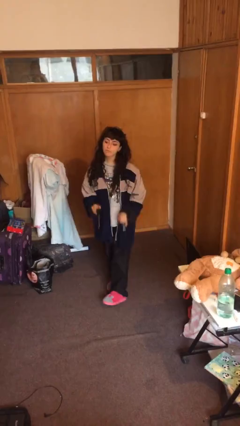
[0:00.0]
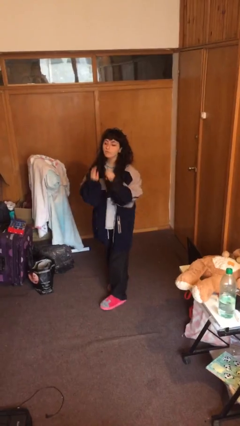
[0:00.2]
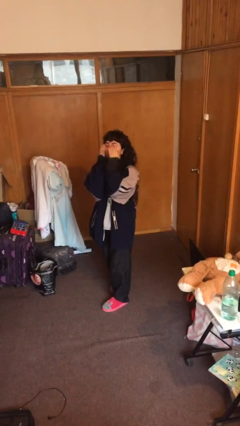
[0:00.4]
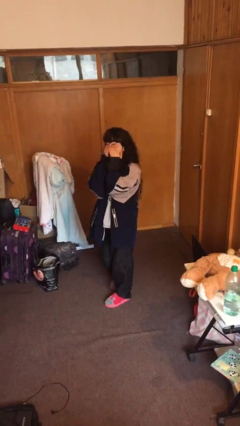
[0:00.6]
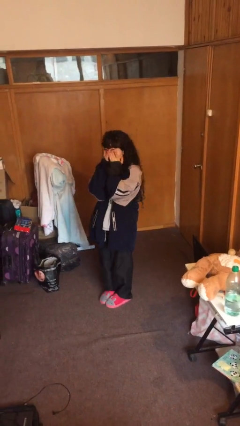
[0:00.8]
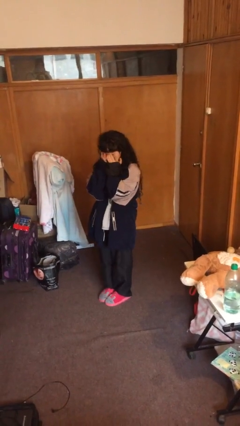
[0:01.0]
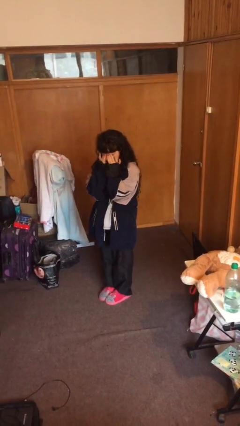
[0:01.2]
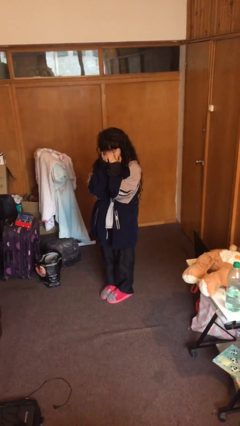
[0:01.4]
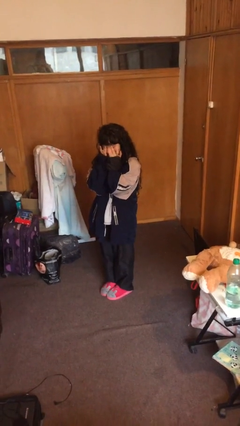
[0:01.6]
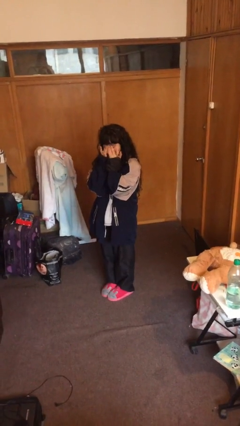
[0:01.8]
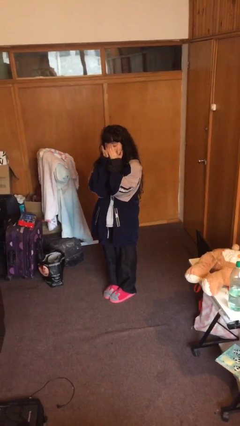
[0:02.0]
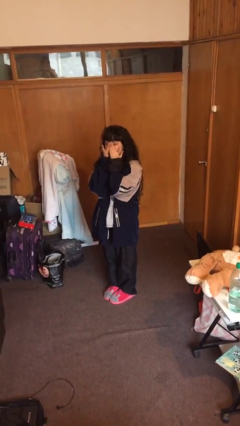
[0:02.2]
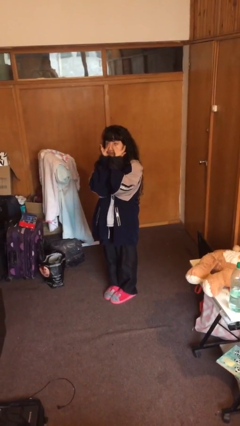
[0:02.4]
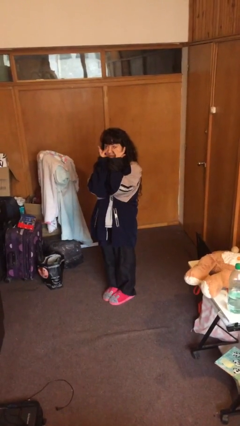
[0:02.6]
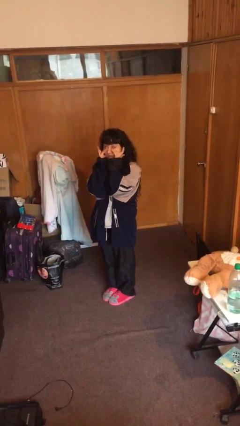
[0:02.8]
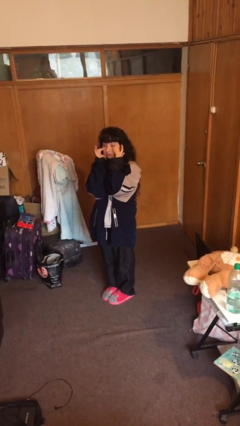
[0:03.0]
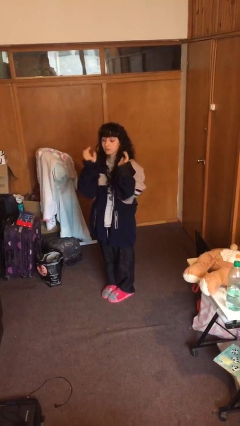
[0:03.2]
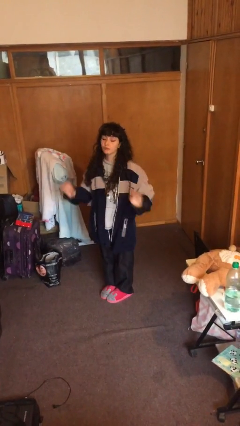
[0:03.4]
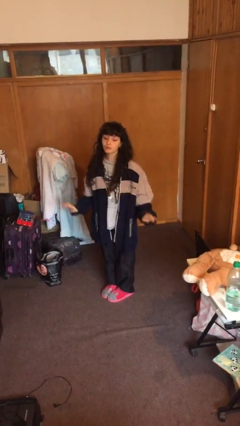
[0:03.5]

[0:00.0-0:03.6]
person rubs eyes

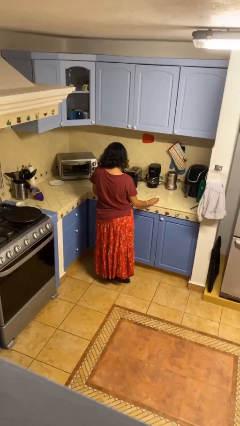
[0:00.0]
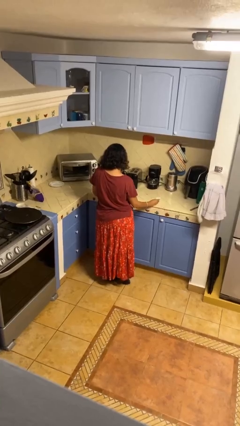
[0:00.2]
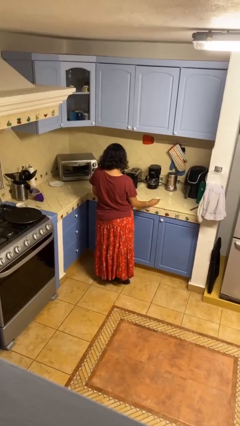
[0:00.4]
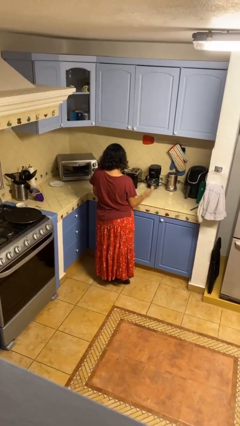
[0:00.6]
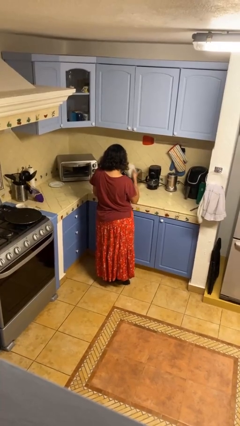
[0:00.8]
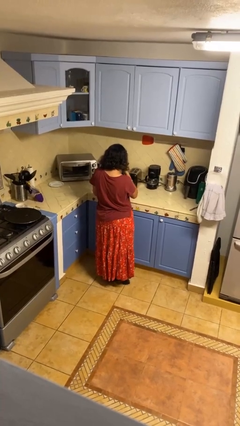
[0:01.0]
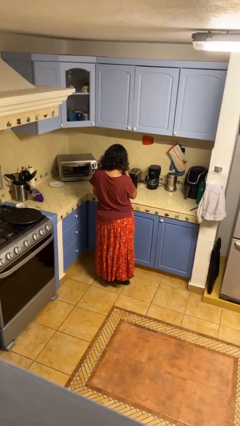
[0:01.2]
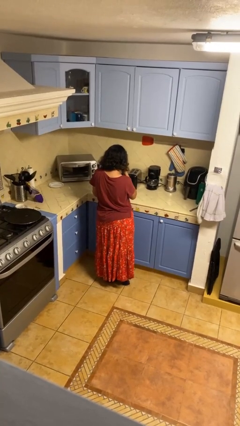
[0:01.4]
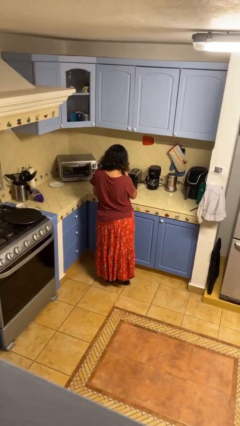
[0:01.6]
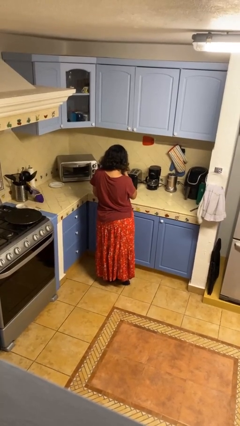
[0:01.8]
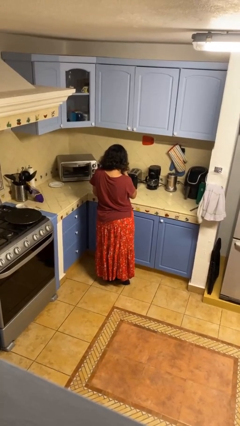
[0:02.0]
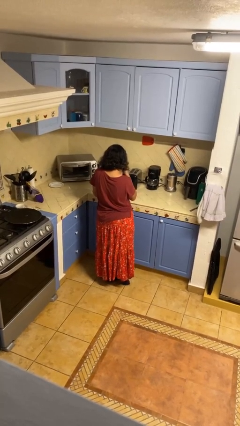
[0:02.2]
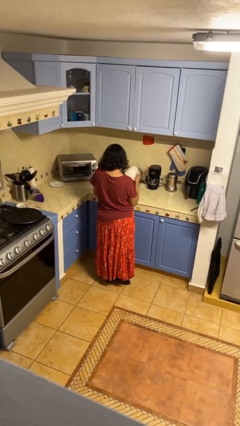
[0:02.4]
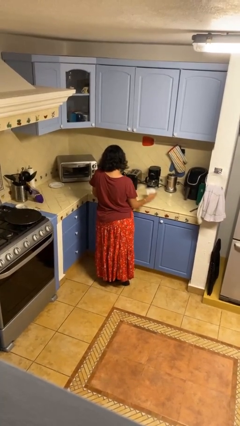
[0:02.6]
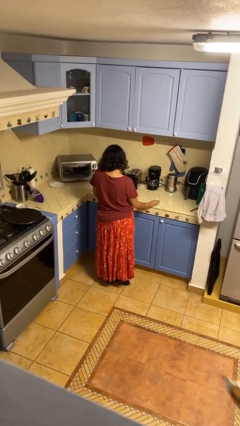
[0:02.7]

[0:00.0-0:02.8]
person wipes mouth with napkin

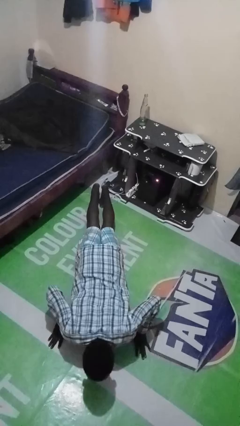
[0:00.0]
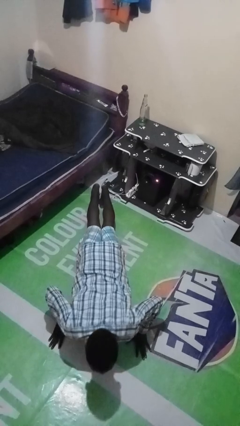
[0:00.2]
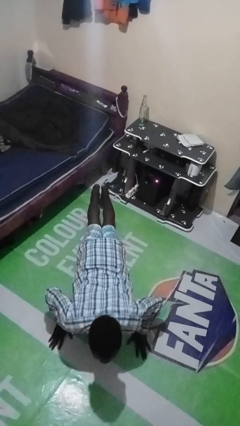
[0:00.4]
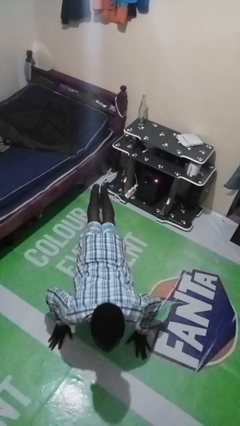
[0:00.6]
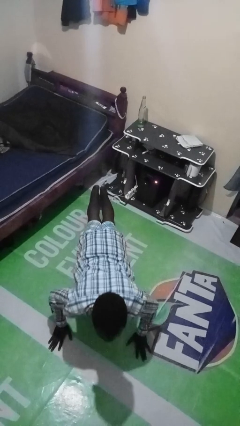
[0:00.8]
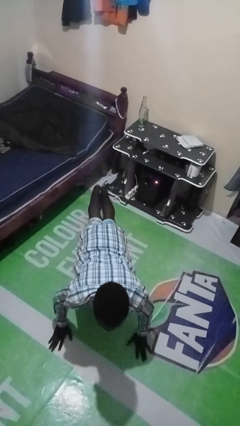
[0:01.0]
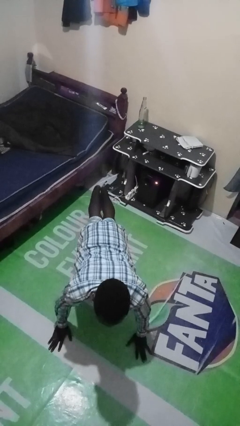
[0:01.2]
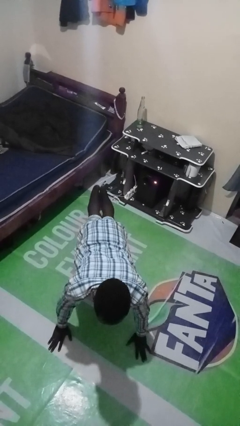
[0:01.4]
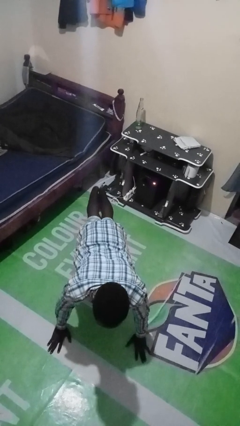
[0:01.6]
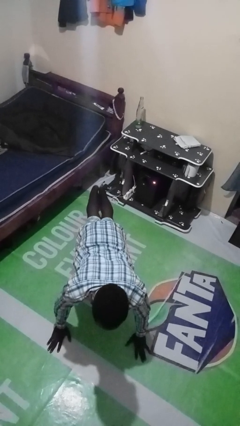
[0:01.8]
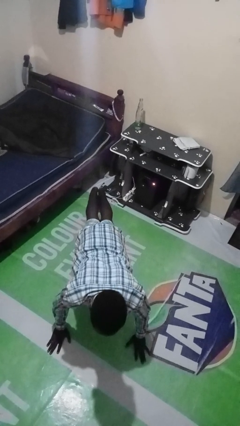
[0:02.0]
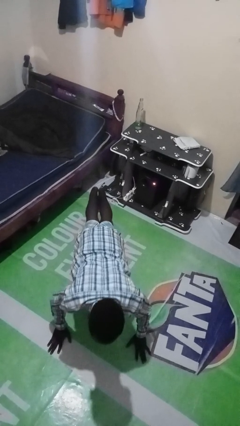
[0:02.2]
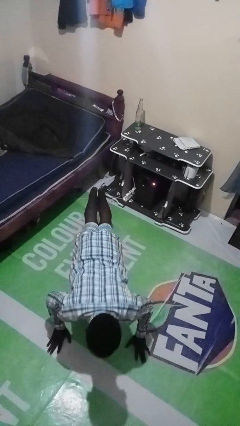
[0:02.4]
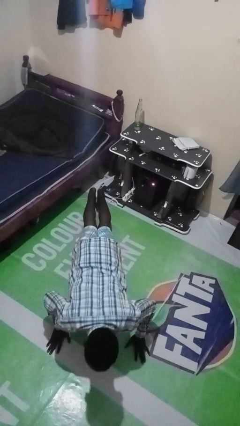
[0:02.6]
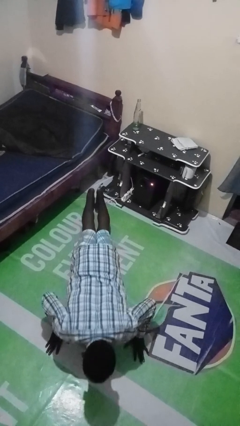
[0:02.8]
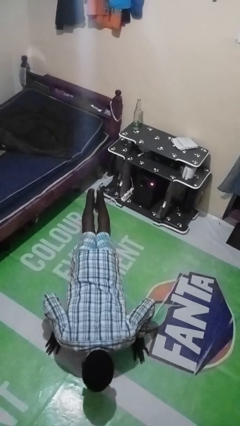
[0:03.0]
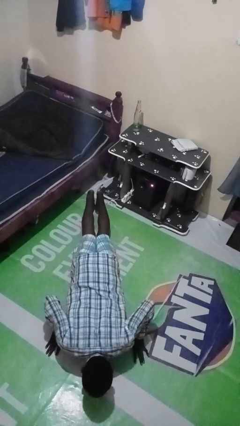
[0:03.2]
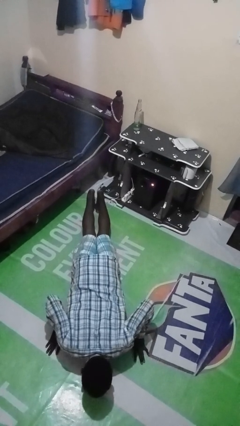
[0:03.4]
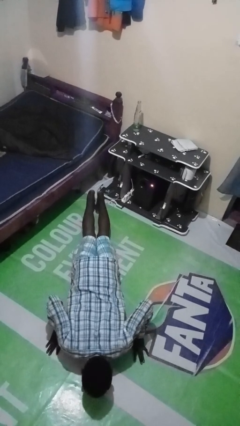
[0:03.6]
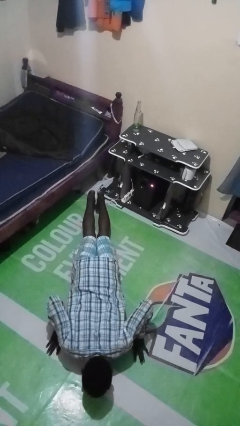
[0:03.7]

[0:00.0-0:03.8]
person exercises with pushup

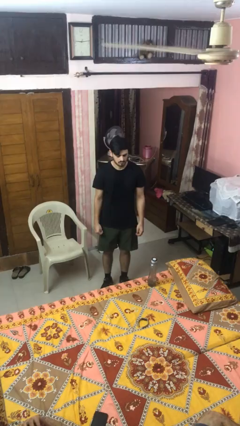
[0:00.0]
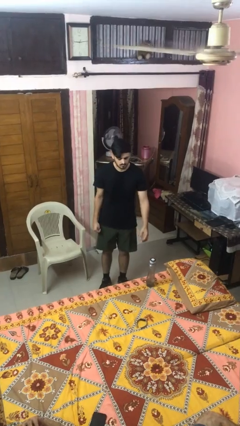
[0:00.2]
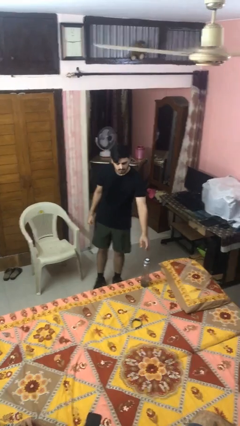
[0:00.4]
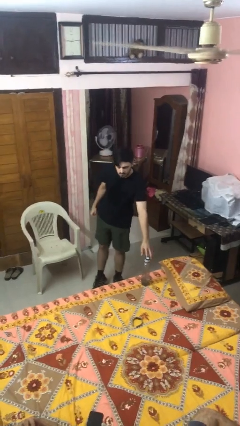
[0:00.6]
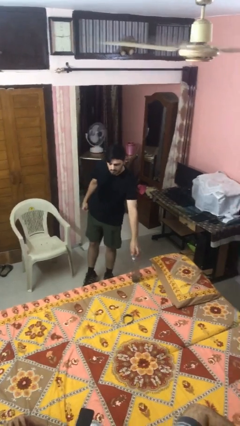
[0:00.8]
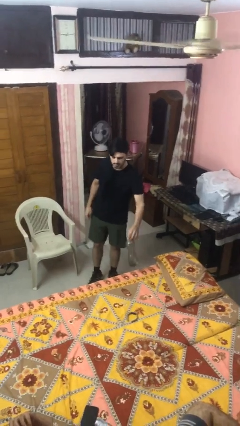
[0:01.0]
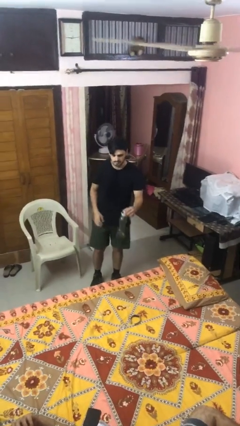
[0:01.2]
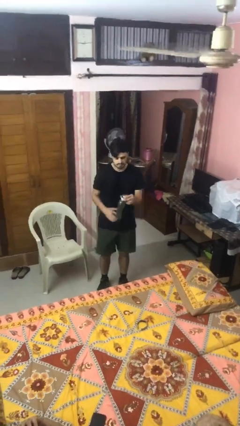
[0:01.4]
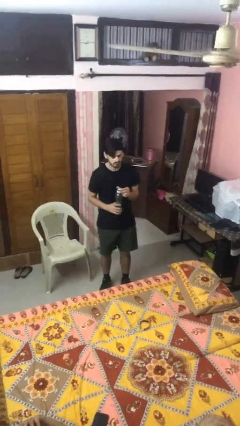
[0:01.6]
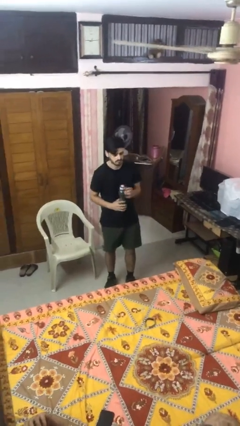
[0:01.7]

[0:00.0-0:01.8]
person picks up object from bed

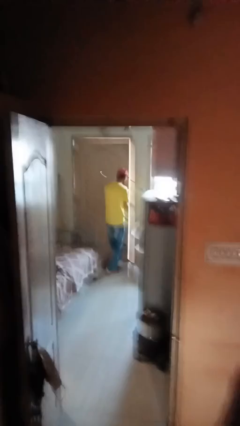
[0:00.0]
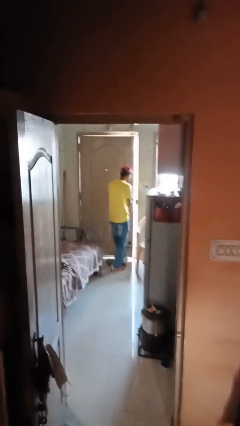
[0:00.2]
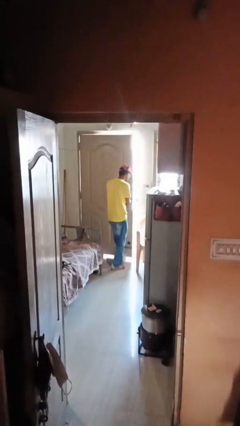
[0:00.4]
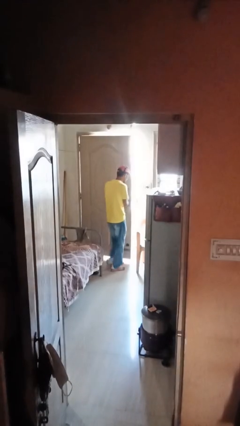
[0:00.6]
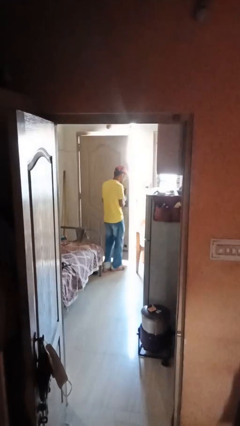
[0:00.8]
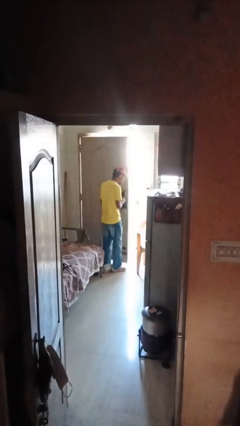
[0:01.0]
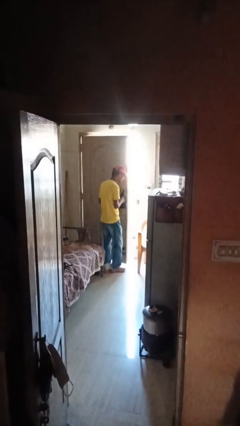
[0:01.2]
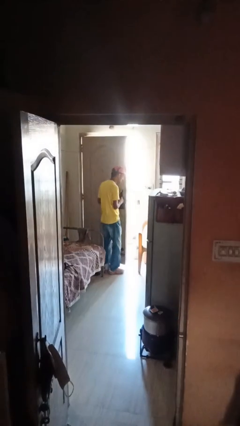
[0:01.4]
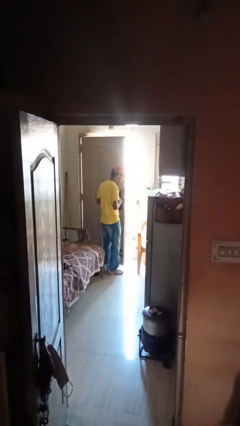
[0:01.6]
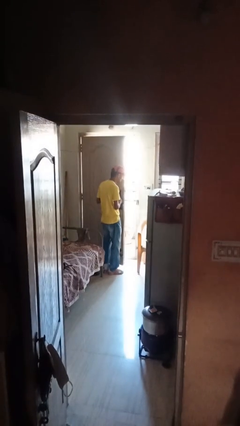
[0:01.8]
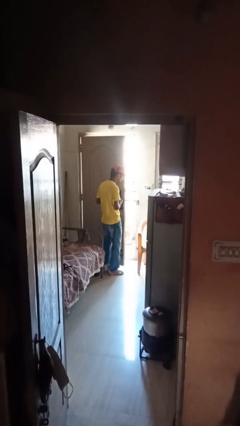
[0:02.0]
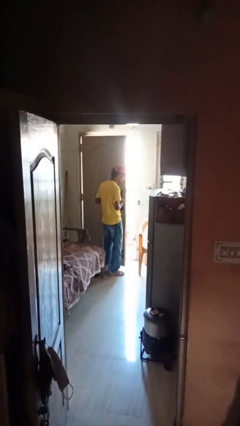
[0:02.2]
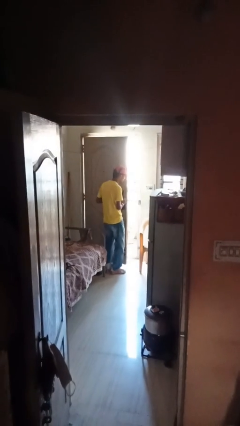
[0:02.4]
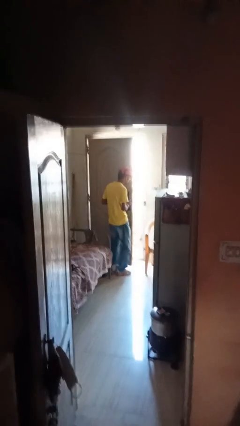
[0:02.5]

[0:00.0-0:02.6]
person opens facility door

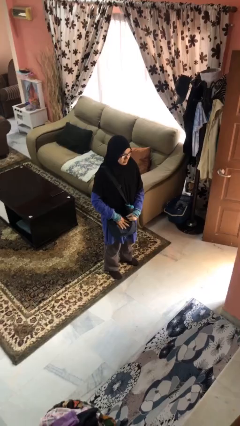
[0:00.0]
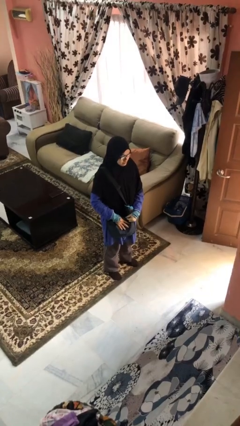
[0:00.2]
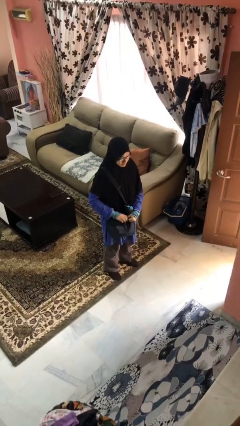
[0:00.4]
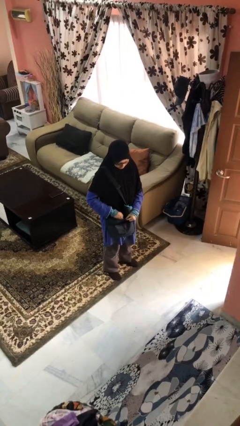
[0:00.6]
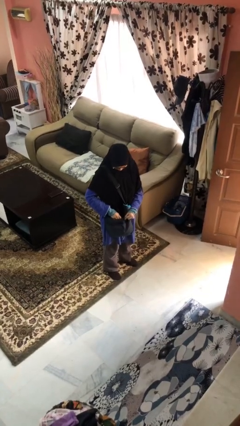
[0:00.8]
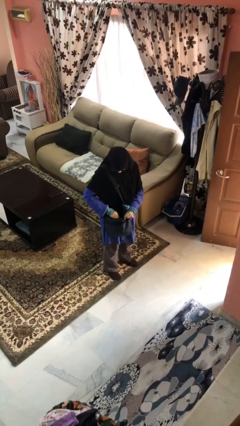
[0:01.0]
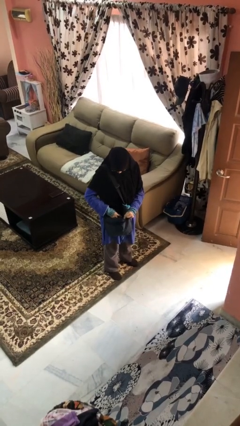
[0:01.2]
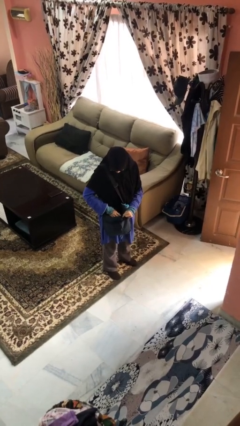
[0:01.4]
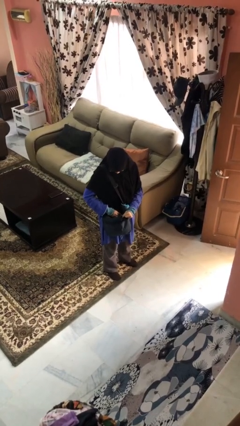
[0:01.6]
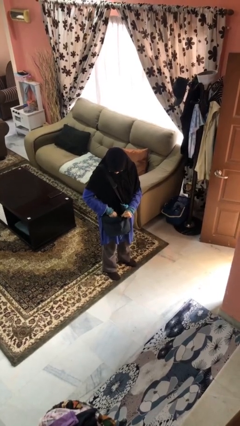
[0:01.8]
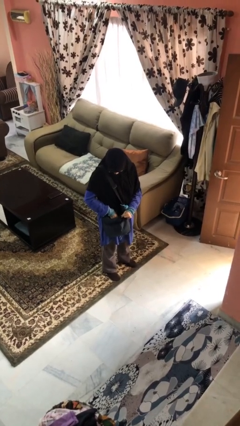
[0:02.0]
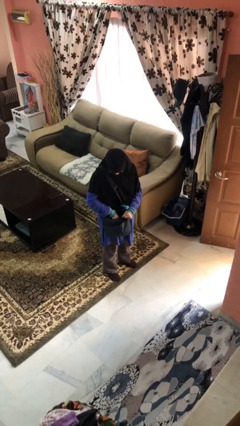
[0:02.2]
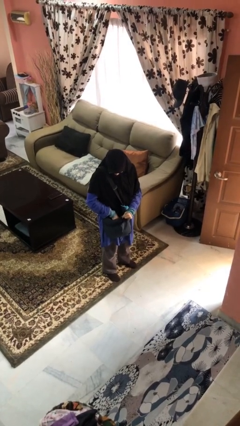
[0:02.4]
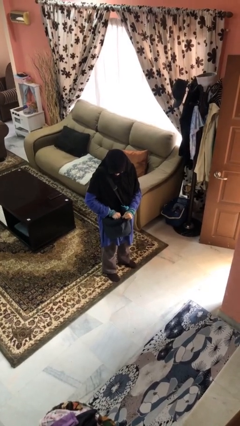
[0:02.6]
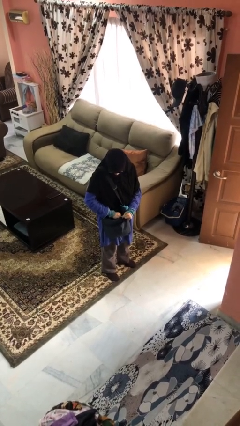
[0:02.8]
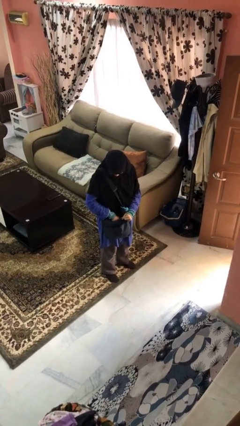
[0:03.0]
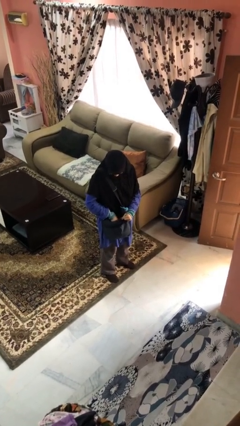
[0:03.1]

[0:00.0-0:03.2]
person searches in purse
